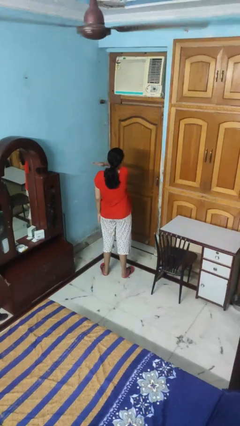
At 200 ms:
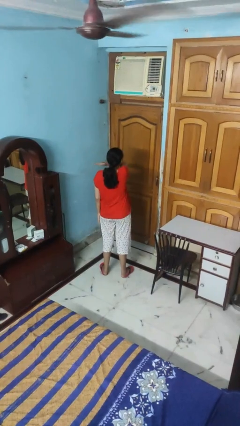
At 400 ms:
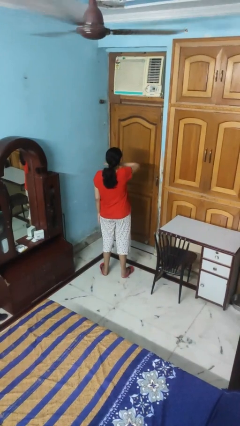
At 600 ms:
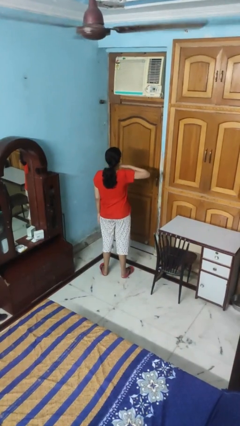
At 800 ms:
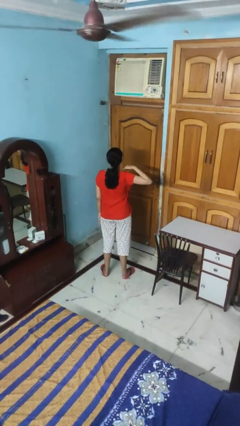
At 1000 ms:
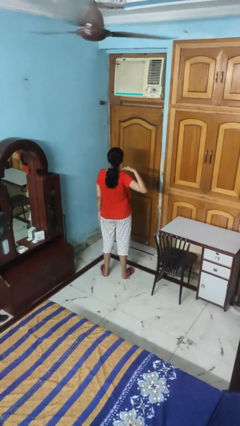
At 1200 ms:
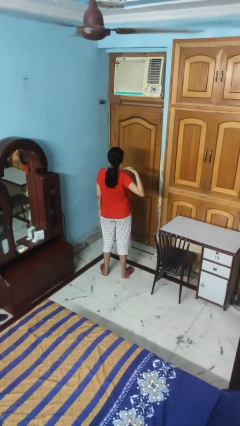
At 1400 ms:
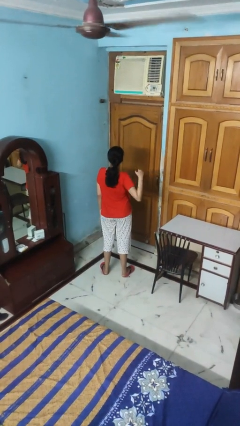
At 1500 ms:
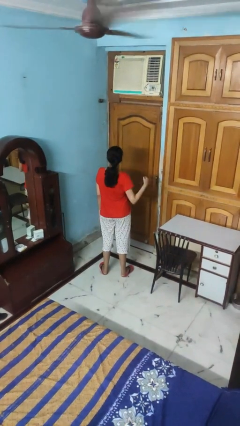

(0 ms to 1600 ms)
person gestures cut

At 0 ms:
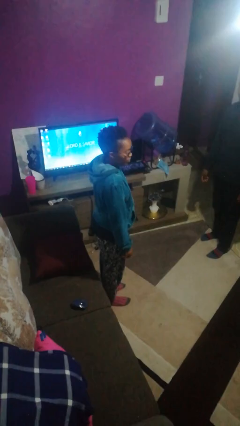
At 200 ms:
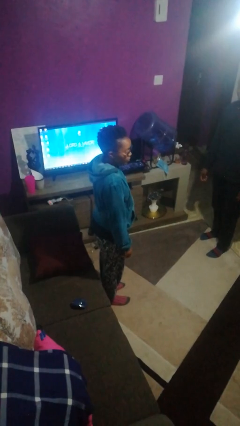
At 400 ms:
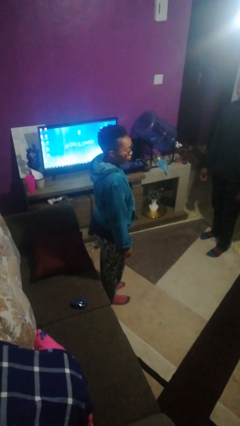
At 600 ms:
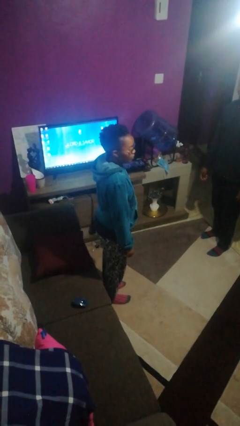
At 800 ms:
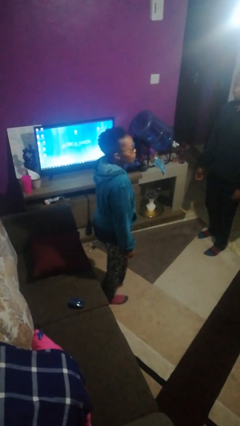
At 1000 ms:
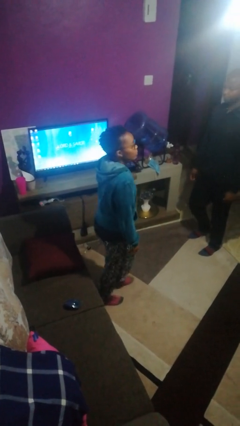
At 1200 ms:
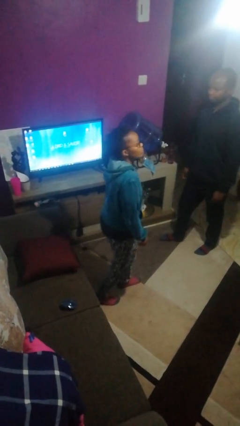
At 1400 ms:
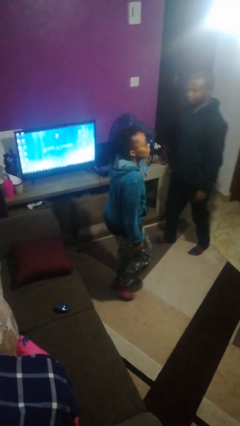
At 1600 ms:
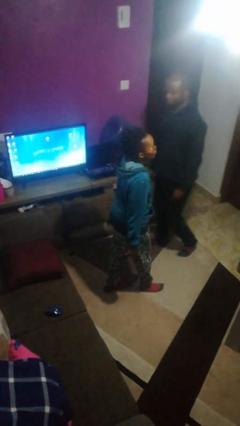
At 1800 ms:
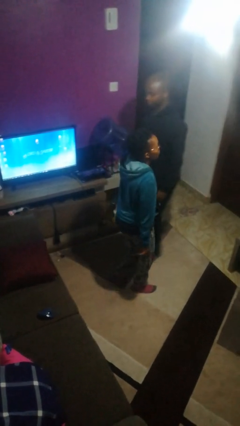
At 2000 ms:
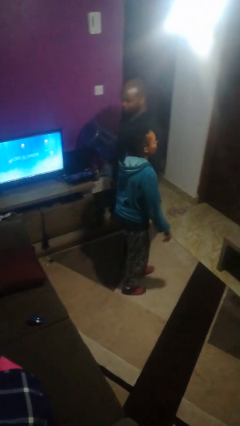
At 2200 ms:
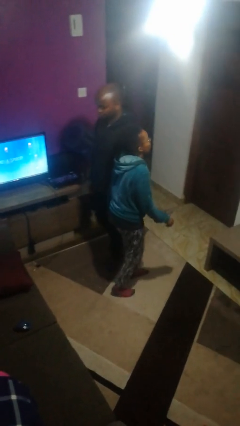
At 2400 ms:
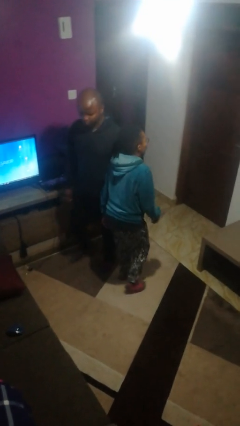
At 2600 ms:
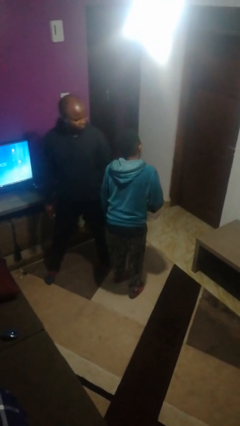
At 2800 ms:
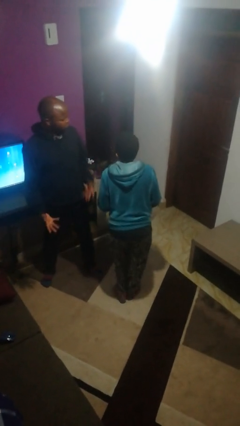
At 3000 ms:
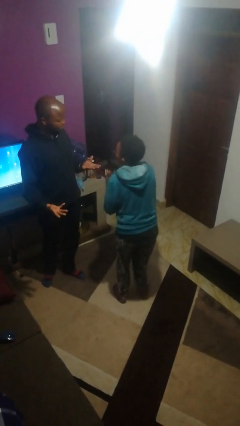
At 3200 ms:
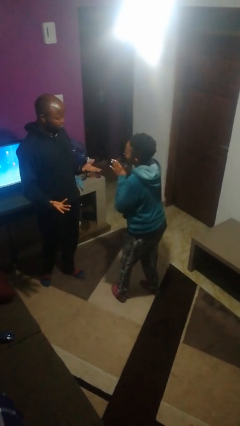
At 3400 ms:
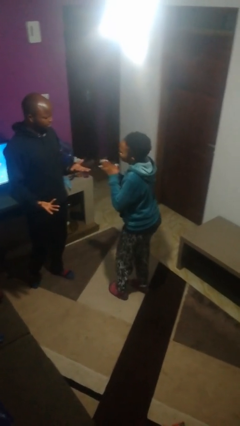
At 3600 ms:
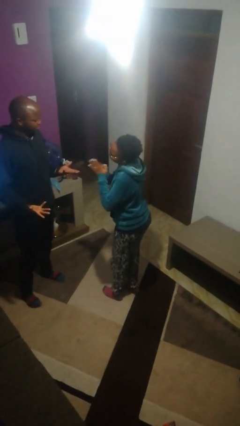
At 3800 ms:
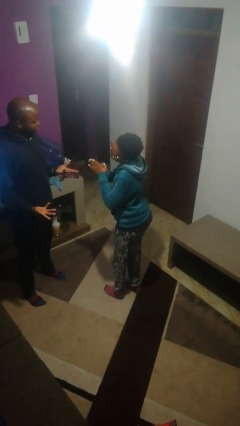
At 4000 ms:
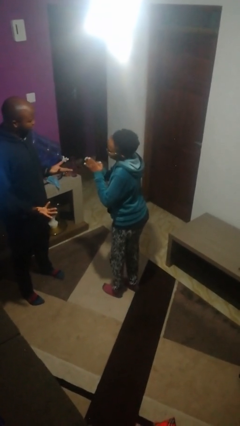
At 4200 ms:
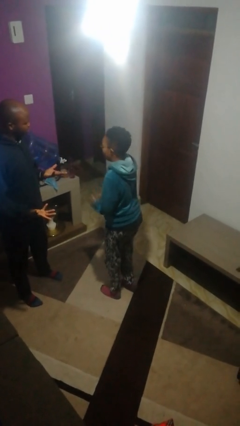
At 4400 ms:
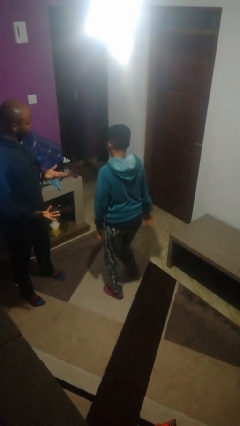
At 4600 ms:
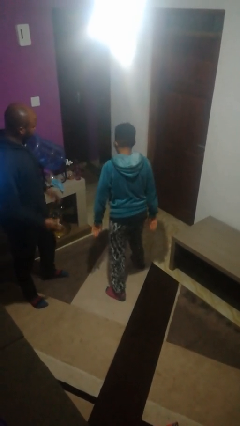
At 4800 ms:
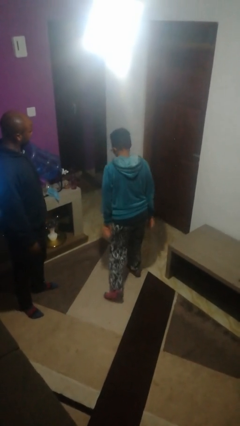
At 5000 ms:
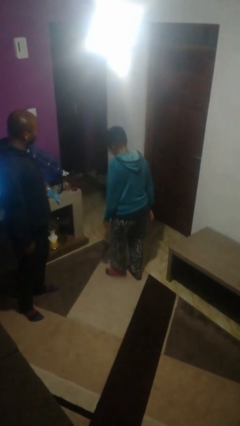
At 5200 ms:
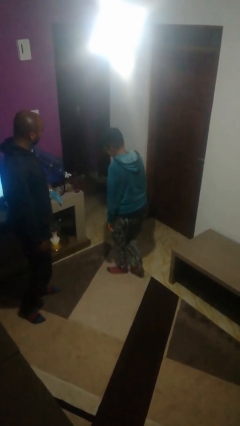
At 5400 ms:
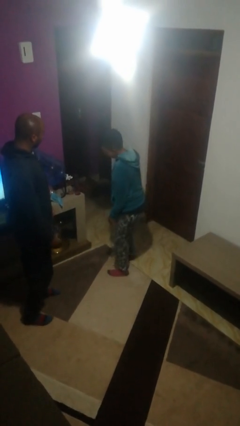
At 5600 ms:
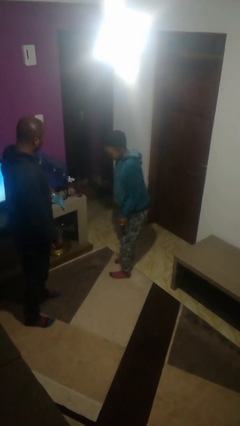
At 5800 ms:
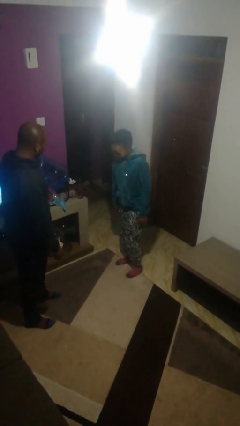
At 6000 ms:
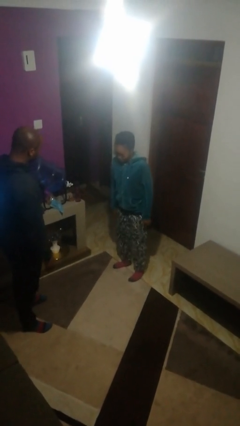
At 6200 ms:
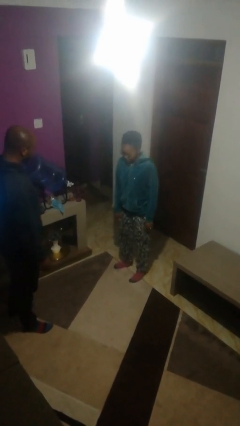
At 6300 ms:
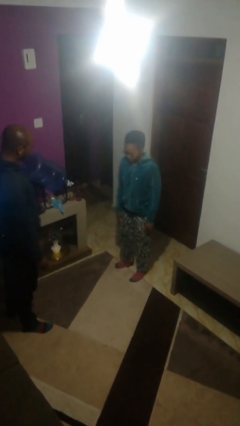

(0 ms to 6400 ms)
person bumps into person

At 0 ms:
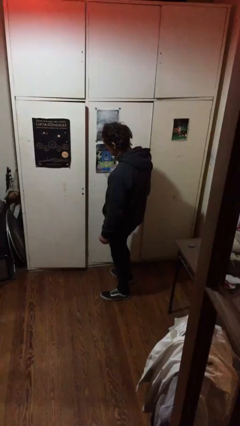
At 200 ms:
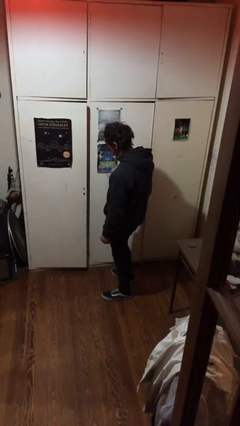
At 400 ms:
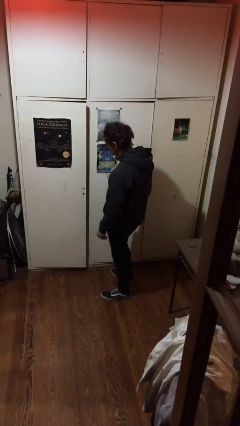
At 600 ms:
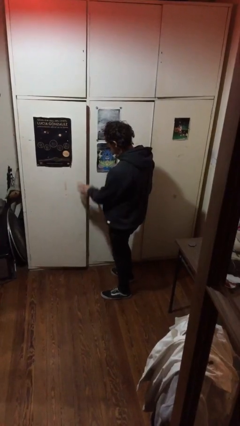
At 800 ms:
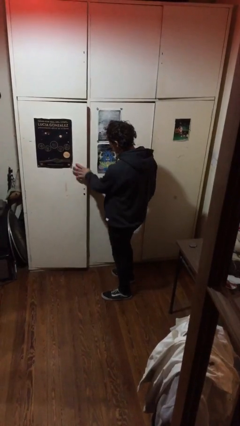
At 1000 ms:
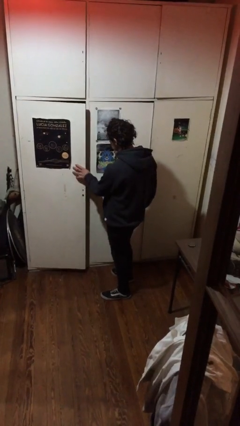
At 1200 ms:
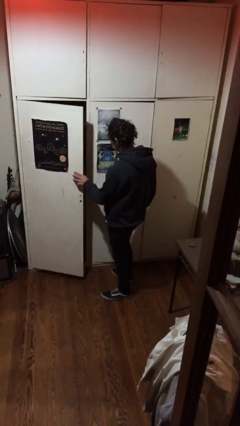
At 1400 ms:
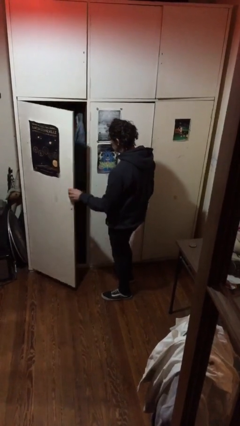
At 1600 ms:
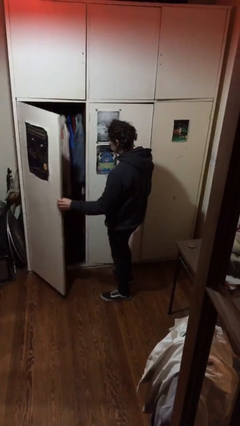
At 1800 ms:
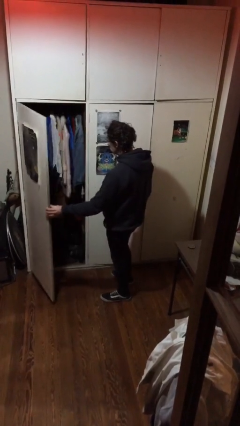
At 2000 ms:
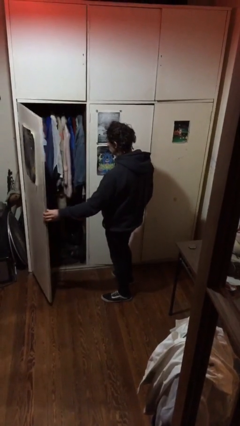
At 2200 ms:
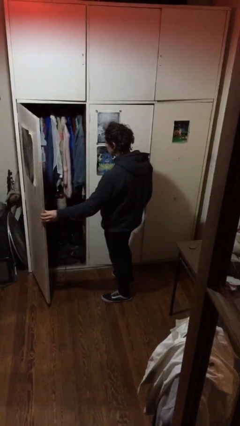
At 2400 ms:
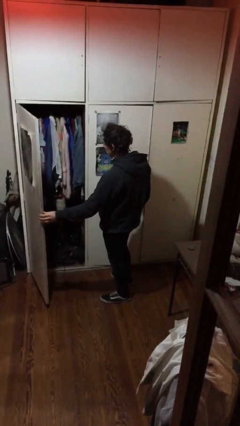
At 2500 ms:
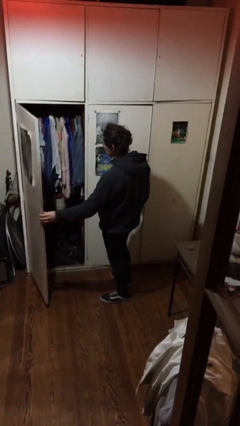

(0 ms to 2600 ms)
person opens closet door

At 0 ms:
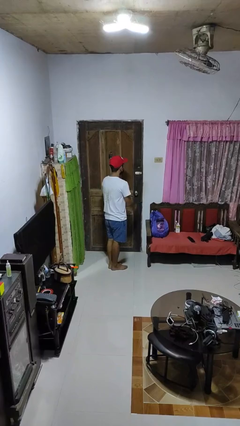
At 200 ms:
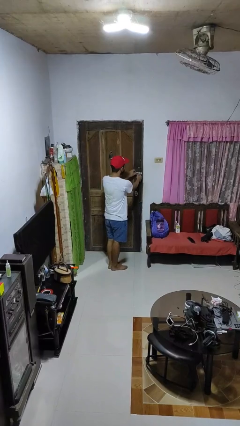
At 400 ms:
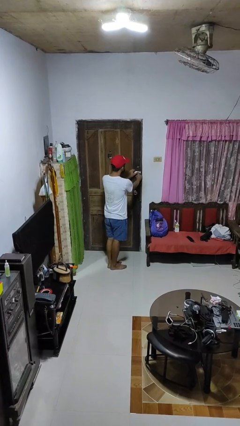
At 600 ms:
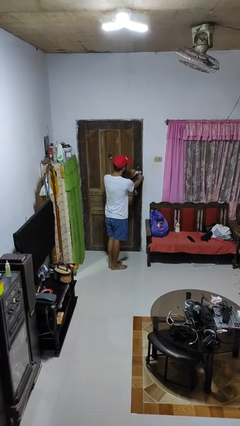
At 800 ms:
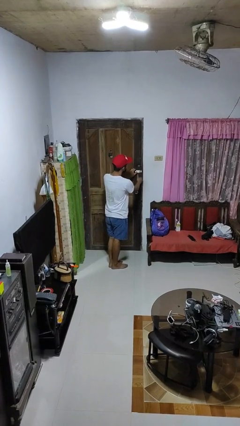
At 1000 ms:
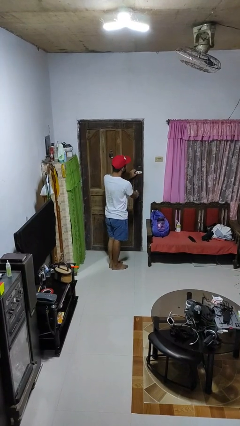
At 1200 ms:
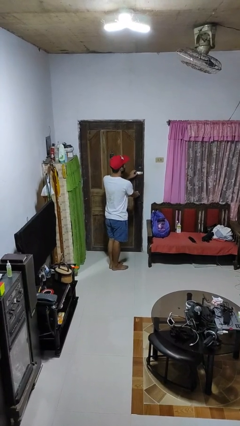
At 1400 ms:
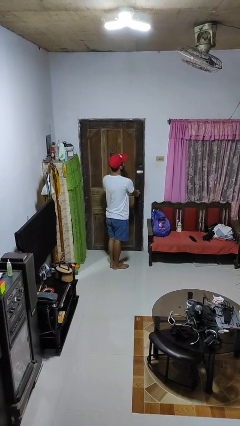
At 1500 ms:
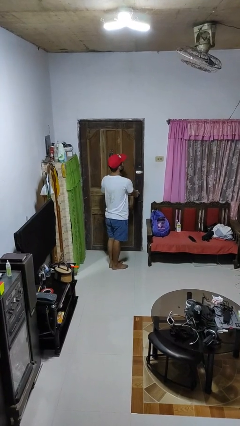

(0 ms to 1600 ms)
person unlocks door with keys

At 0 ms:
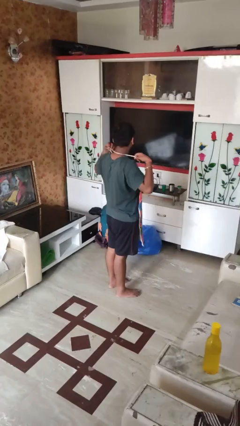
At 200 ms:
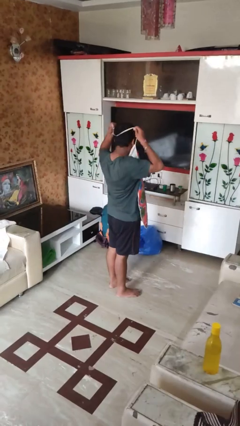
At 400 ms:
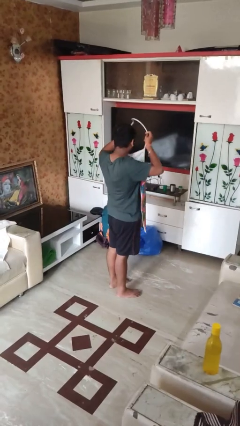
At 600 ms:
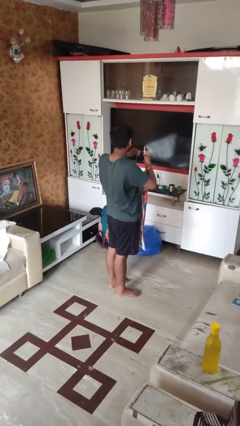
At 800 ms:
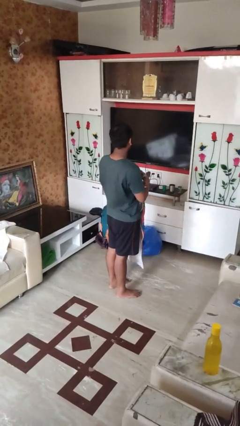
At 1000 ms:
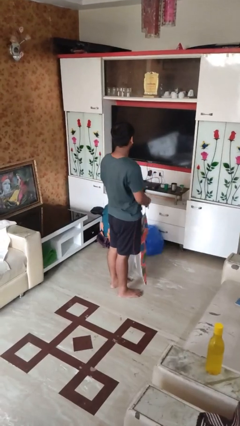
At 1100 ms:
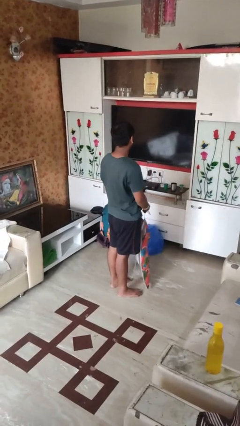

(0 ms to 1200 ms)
person takes off apron

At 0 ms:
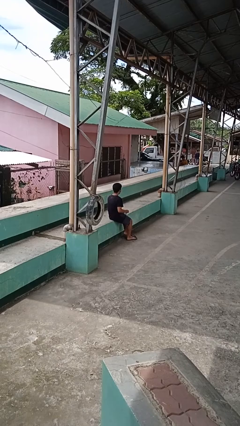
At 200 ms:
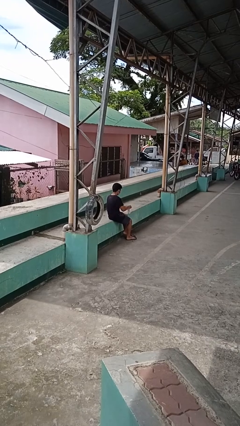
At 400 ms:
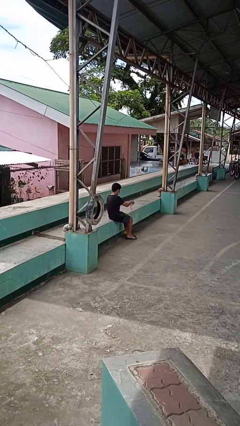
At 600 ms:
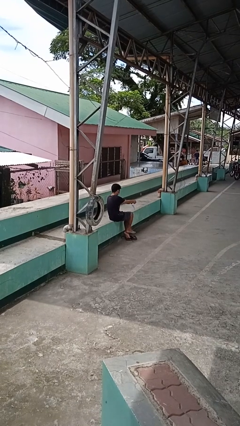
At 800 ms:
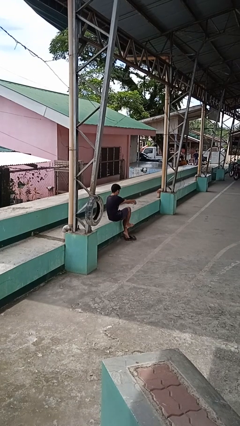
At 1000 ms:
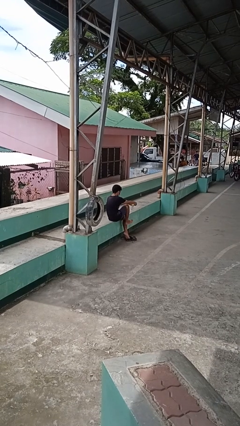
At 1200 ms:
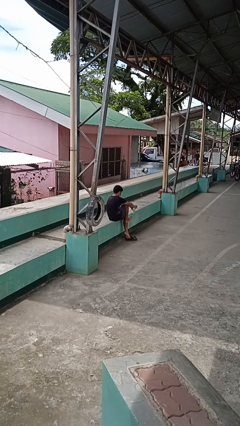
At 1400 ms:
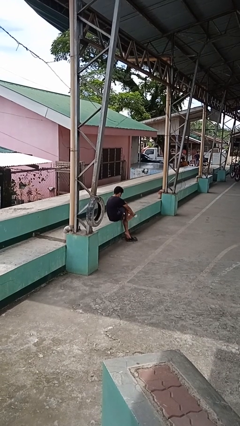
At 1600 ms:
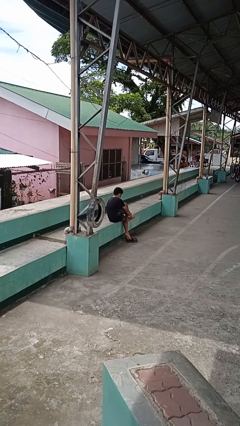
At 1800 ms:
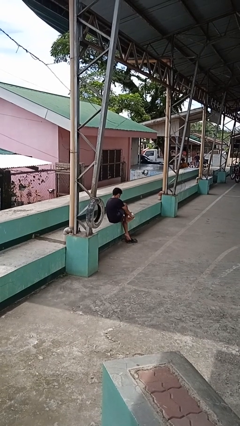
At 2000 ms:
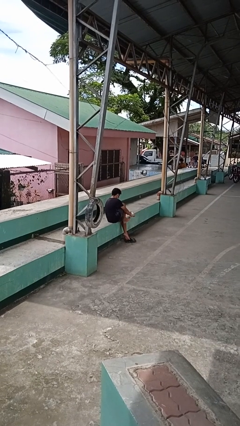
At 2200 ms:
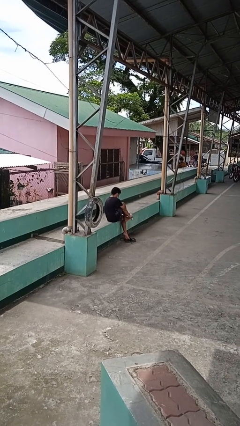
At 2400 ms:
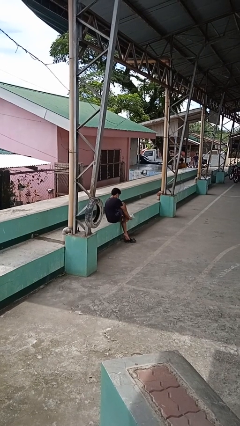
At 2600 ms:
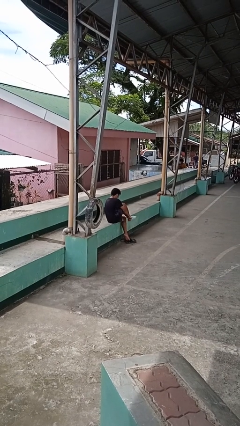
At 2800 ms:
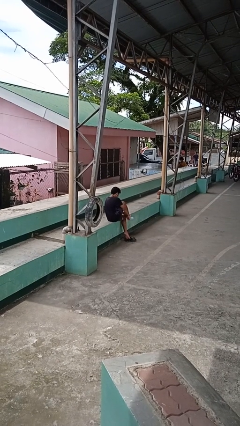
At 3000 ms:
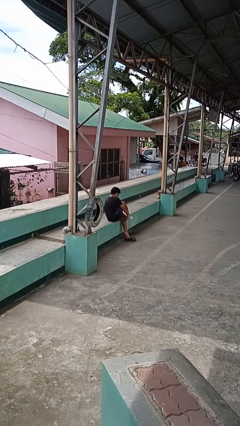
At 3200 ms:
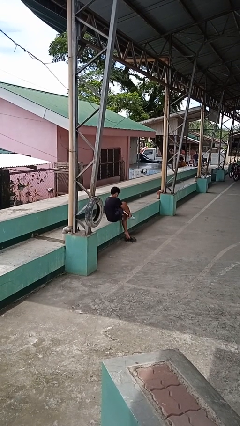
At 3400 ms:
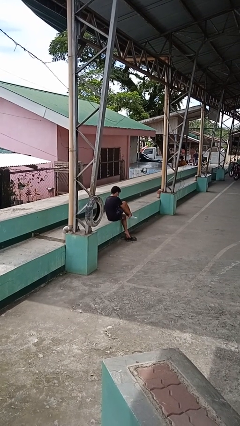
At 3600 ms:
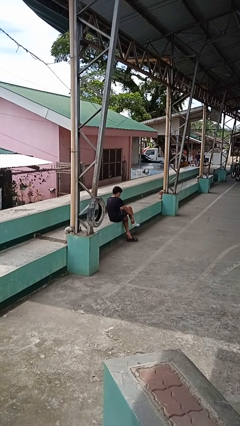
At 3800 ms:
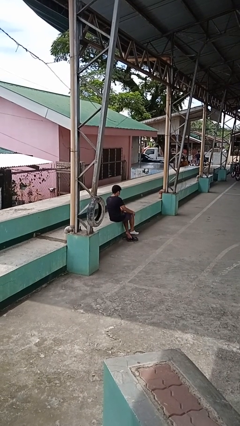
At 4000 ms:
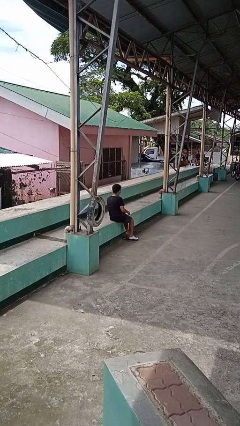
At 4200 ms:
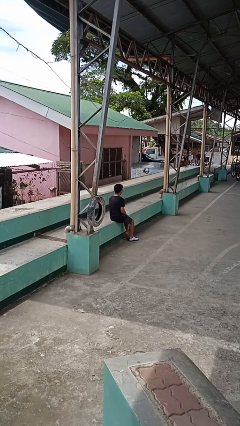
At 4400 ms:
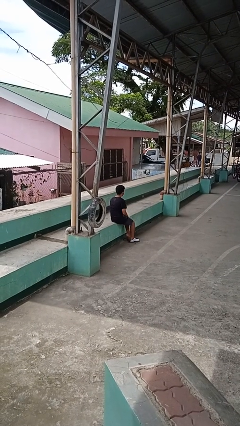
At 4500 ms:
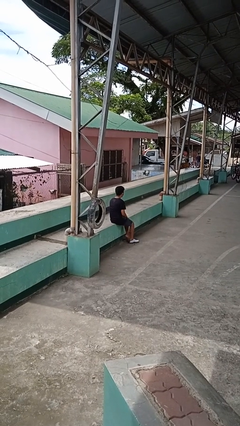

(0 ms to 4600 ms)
person puts on socks
